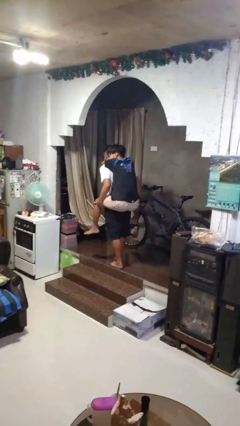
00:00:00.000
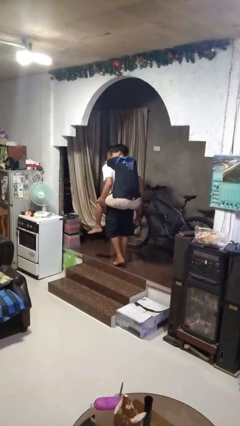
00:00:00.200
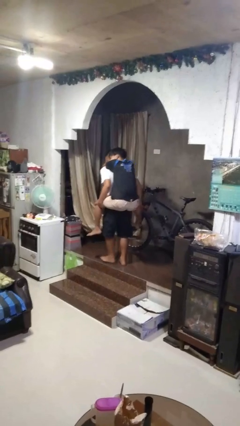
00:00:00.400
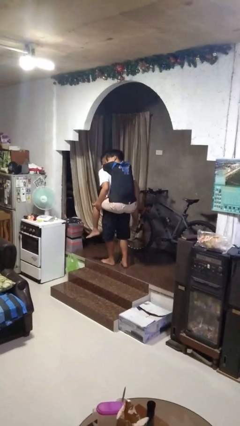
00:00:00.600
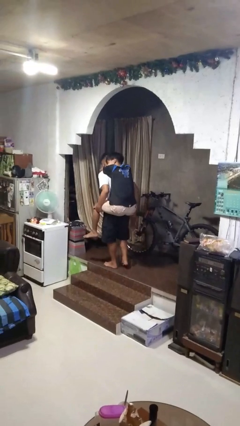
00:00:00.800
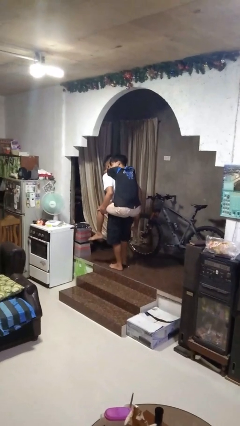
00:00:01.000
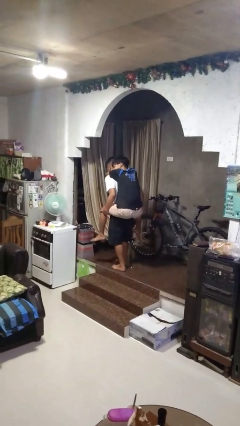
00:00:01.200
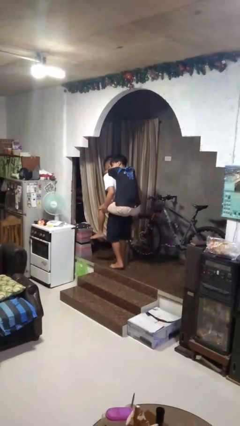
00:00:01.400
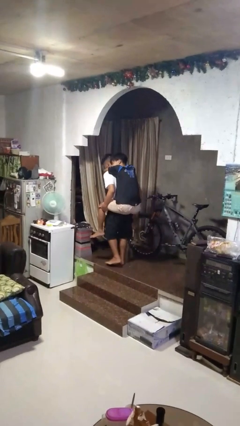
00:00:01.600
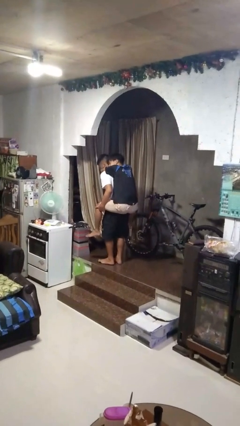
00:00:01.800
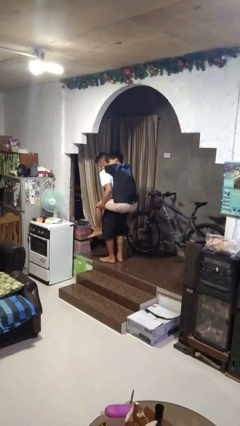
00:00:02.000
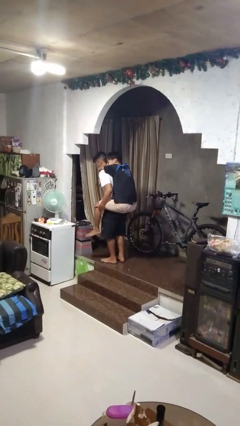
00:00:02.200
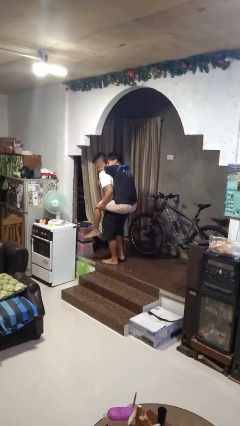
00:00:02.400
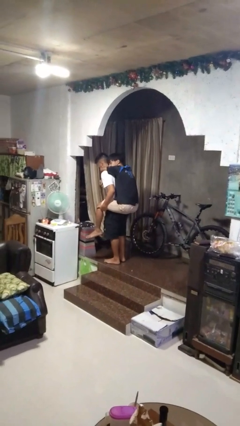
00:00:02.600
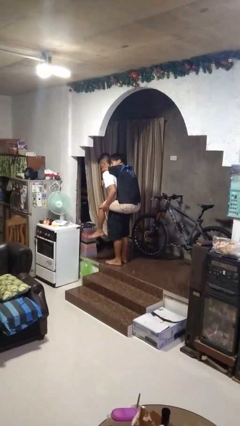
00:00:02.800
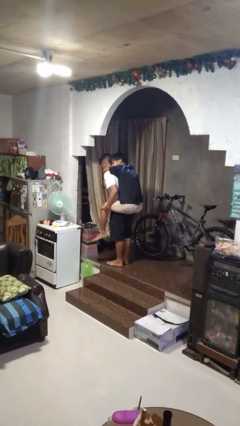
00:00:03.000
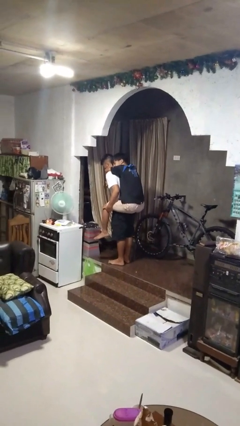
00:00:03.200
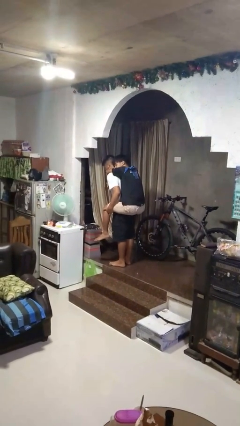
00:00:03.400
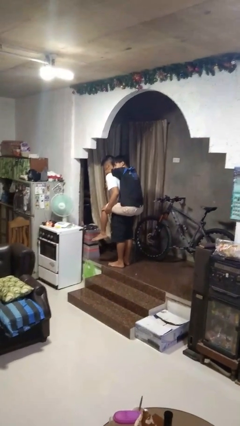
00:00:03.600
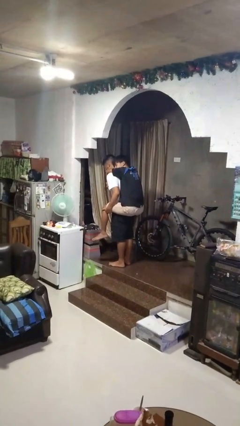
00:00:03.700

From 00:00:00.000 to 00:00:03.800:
person carries person on back

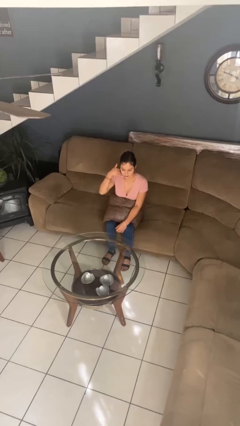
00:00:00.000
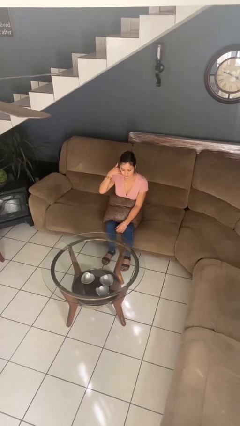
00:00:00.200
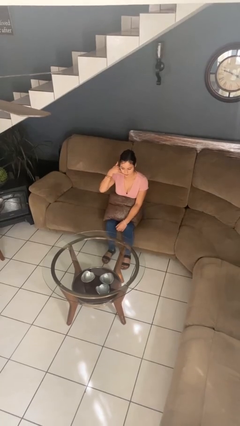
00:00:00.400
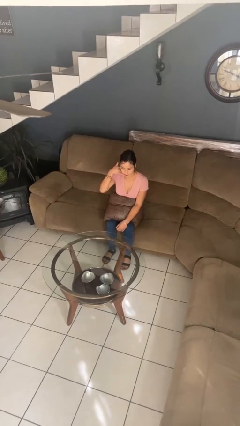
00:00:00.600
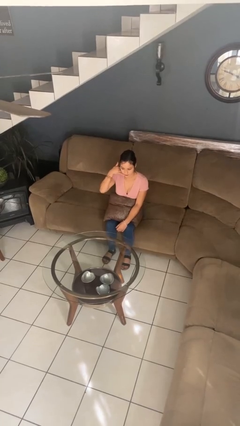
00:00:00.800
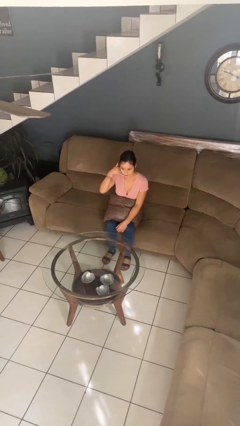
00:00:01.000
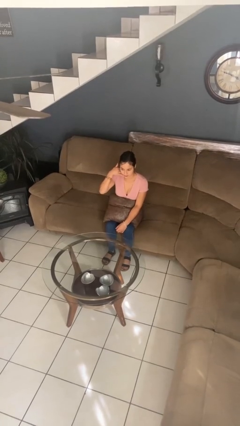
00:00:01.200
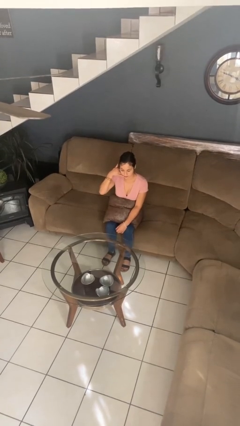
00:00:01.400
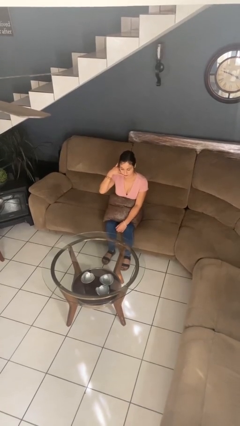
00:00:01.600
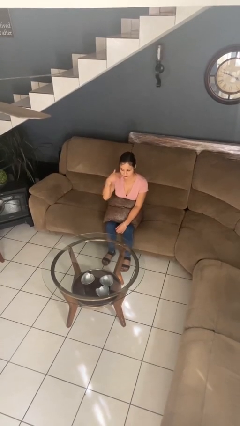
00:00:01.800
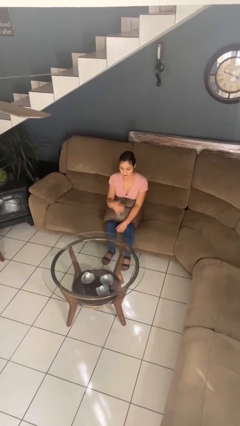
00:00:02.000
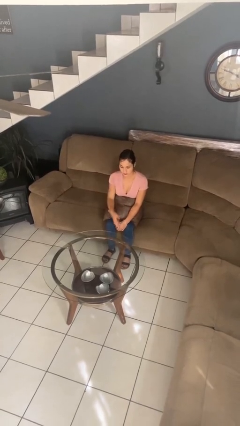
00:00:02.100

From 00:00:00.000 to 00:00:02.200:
person gestures call me

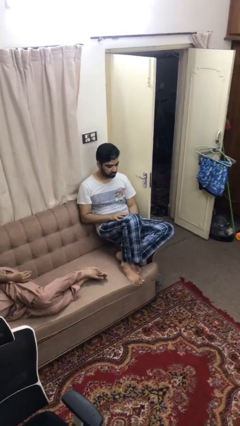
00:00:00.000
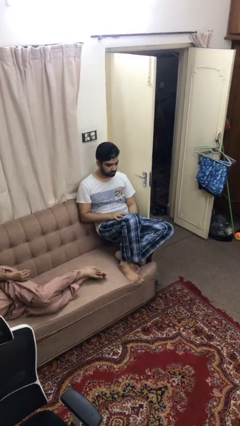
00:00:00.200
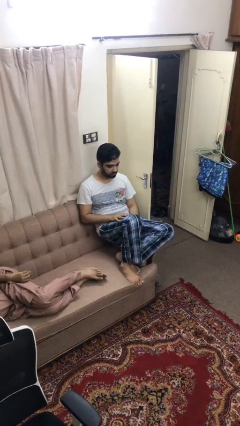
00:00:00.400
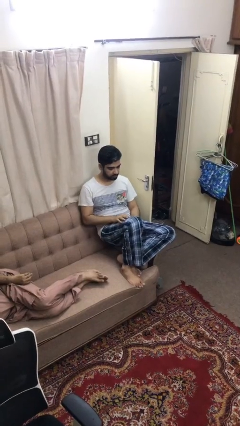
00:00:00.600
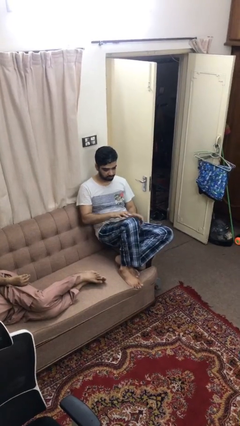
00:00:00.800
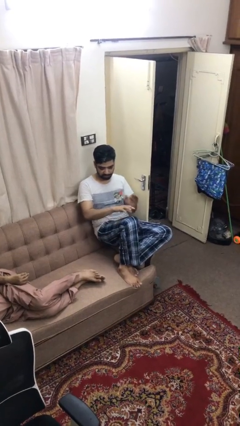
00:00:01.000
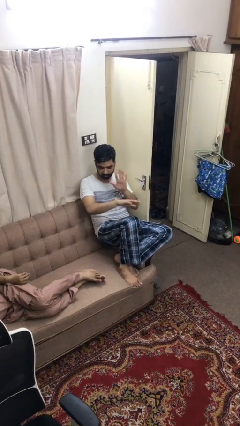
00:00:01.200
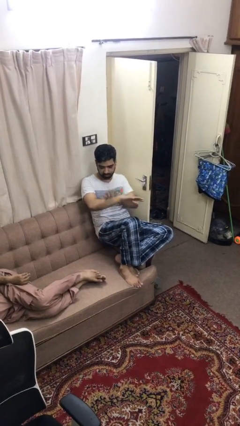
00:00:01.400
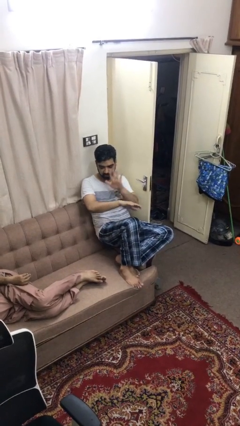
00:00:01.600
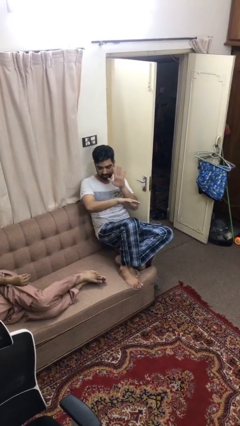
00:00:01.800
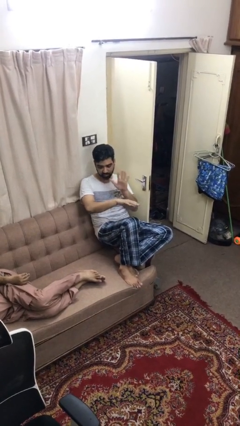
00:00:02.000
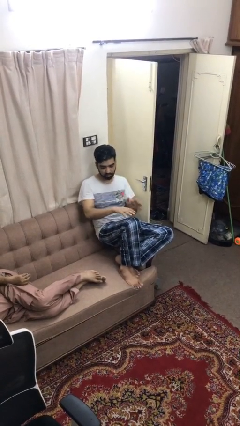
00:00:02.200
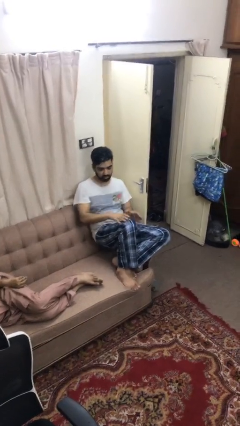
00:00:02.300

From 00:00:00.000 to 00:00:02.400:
person swats bug

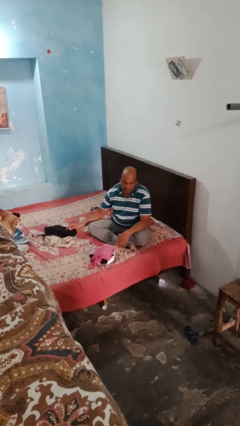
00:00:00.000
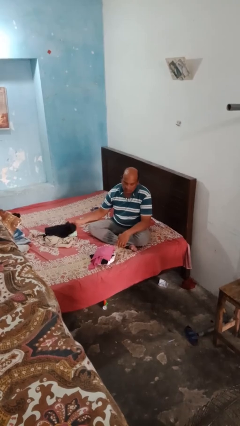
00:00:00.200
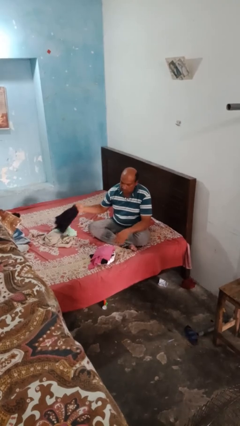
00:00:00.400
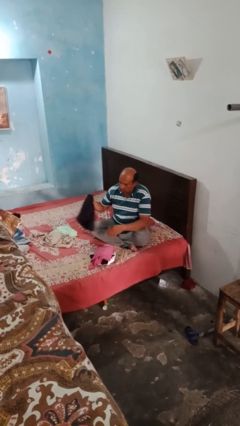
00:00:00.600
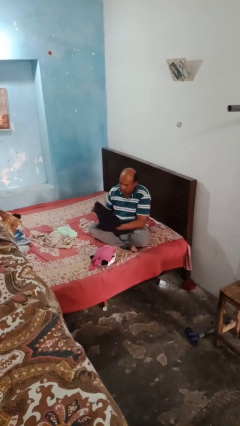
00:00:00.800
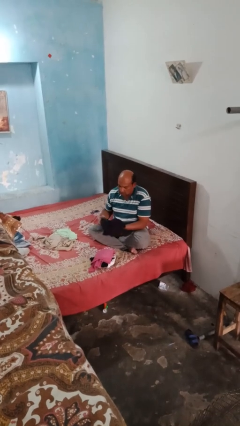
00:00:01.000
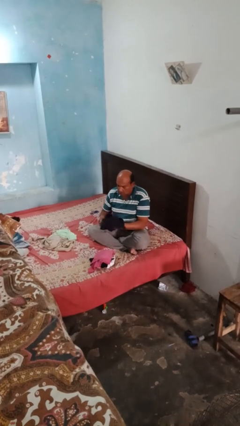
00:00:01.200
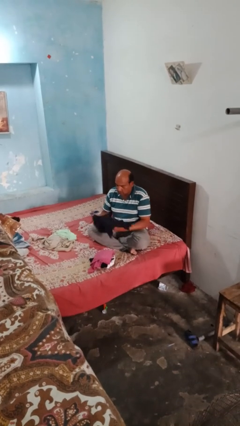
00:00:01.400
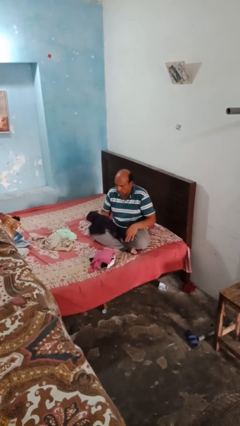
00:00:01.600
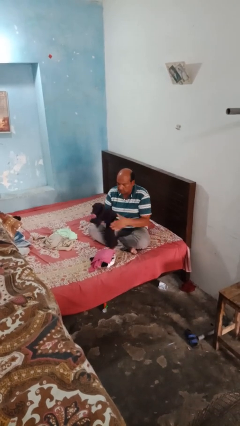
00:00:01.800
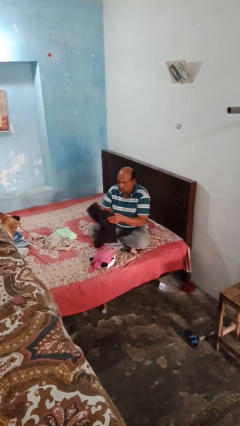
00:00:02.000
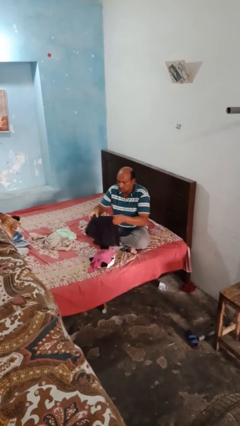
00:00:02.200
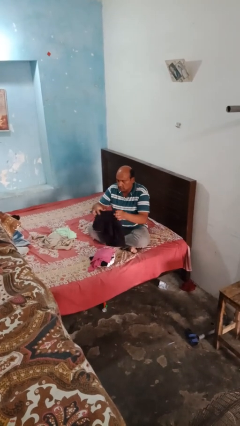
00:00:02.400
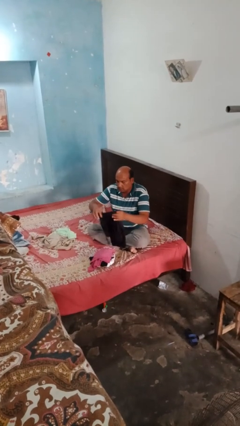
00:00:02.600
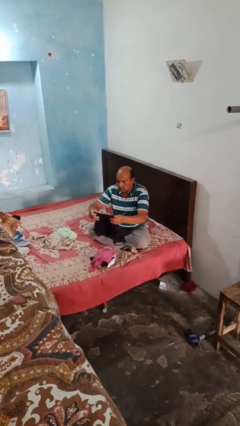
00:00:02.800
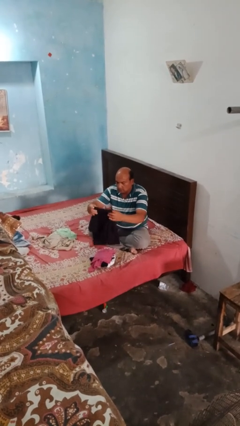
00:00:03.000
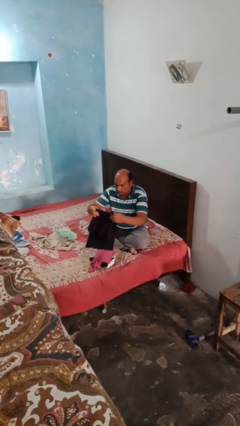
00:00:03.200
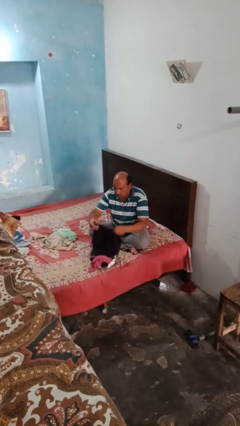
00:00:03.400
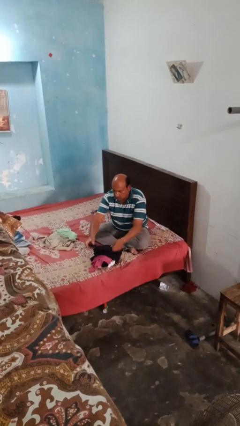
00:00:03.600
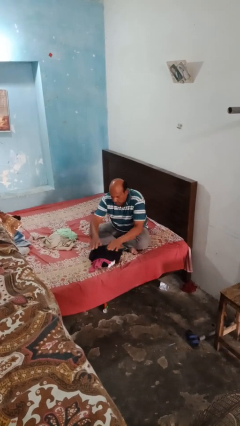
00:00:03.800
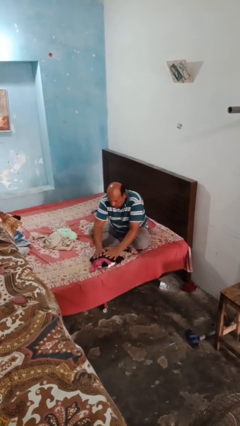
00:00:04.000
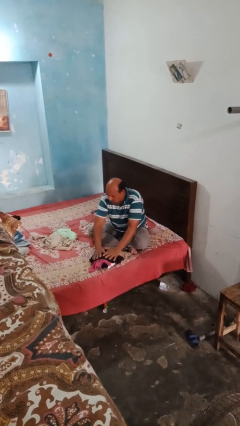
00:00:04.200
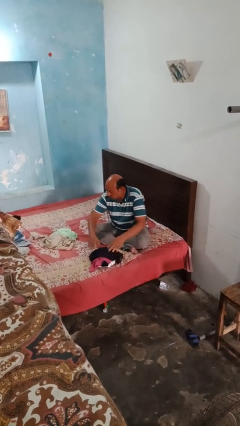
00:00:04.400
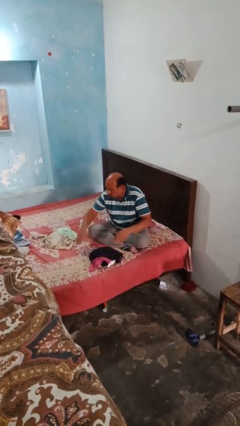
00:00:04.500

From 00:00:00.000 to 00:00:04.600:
person folds shirt

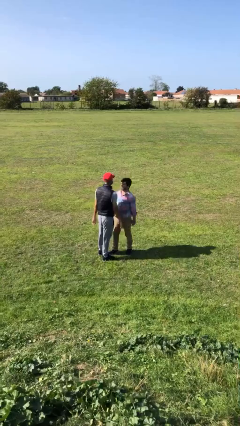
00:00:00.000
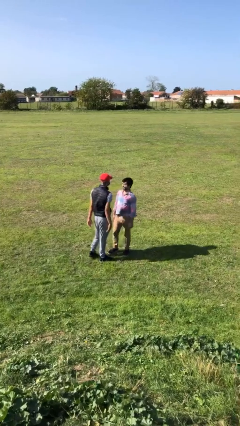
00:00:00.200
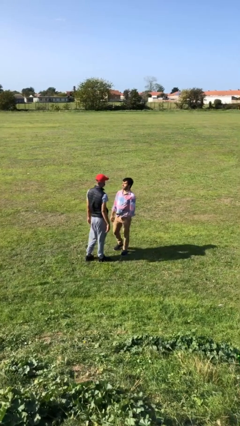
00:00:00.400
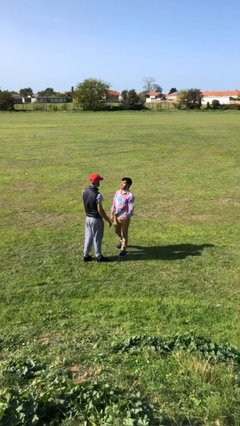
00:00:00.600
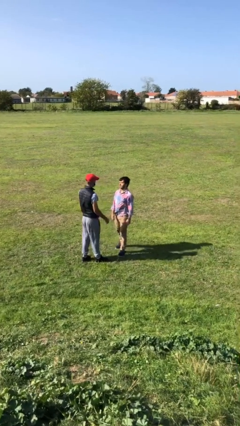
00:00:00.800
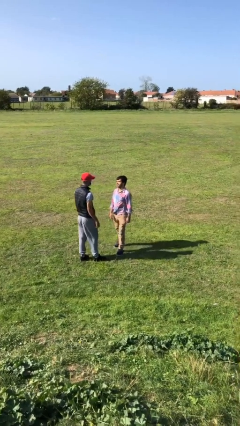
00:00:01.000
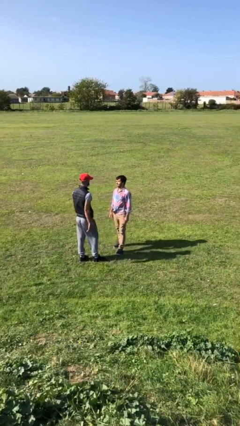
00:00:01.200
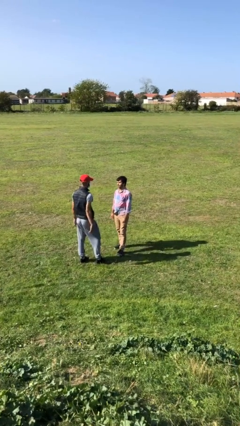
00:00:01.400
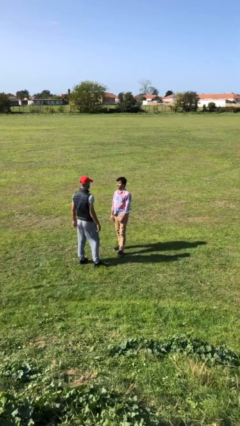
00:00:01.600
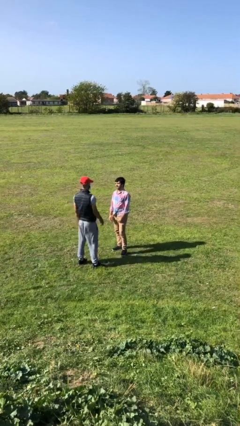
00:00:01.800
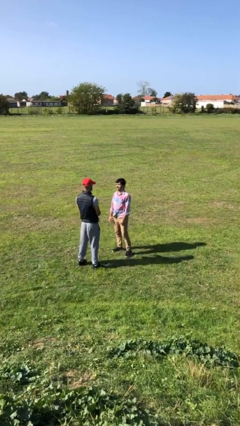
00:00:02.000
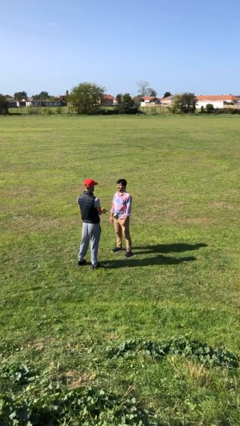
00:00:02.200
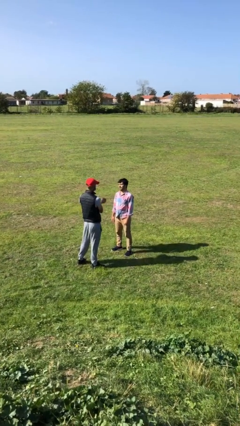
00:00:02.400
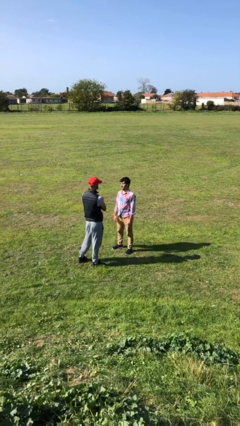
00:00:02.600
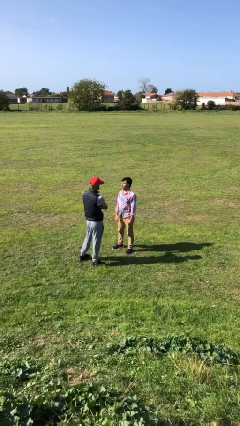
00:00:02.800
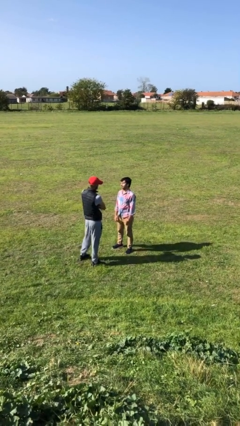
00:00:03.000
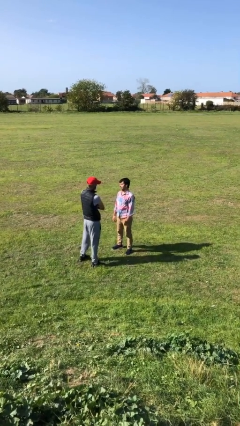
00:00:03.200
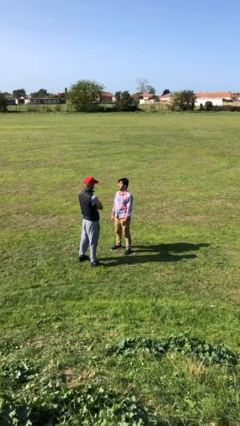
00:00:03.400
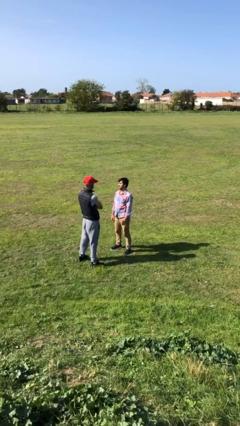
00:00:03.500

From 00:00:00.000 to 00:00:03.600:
person talks to person

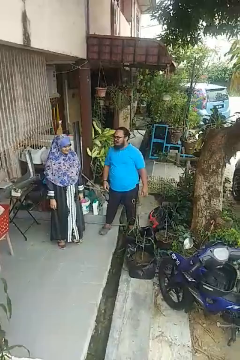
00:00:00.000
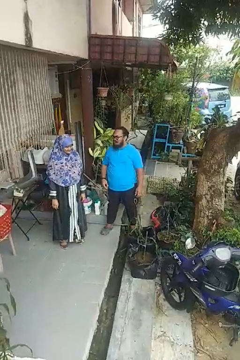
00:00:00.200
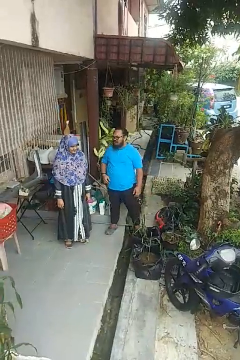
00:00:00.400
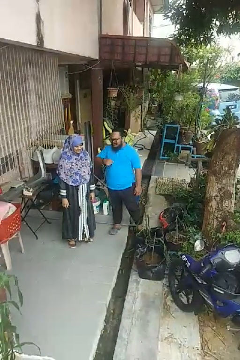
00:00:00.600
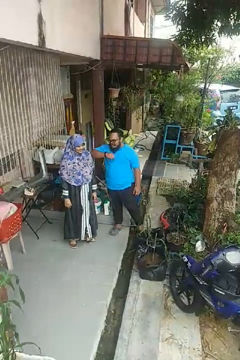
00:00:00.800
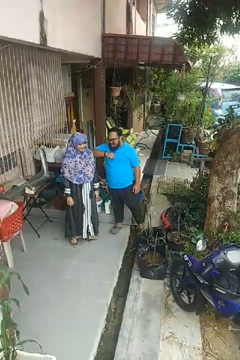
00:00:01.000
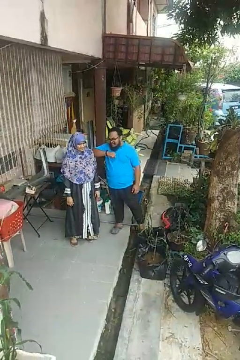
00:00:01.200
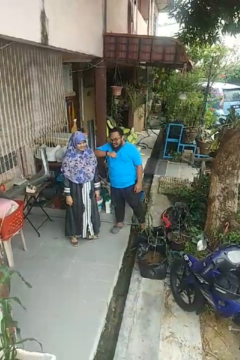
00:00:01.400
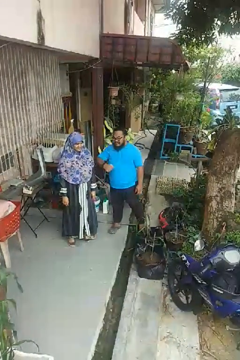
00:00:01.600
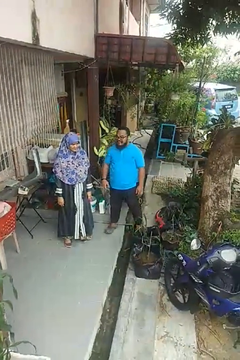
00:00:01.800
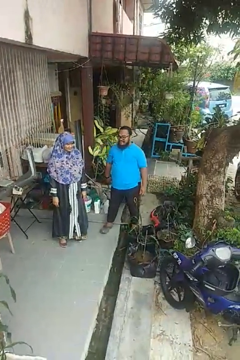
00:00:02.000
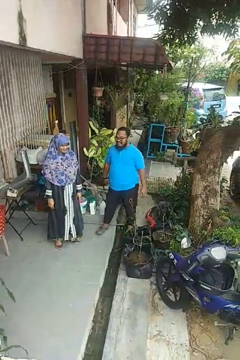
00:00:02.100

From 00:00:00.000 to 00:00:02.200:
person nudges person with elbow
